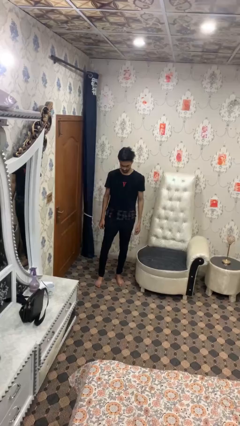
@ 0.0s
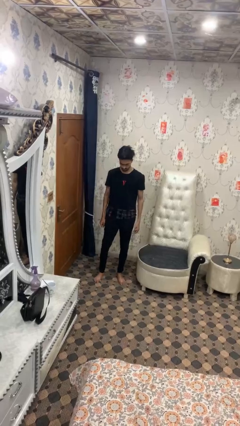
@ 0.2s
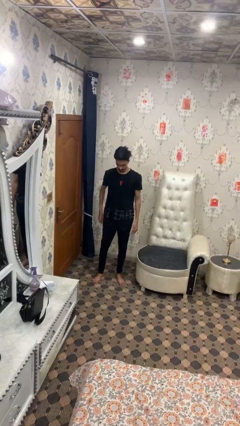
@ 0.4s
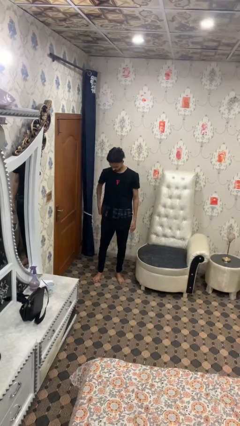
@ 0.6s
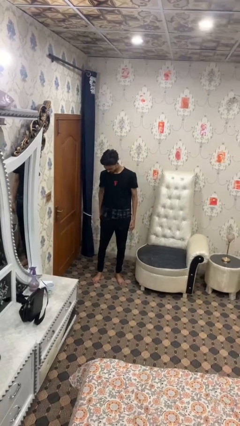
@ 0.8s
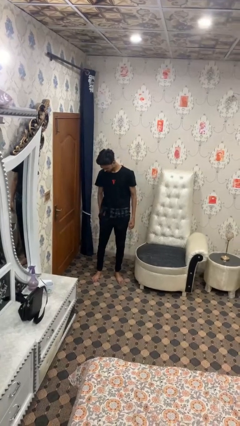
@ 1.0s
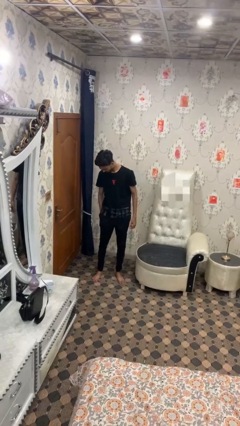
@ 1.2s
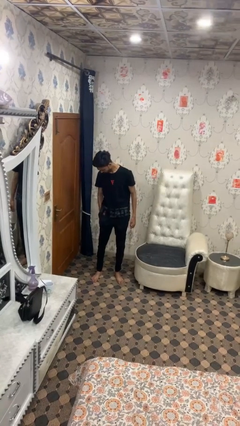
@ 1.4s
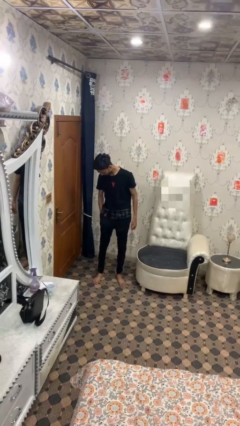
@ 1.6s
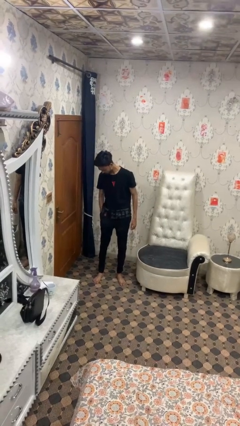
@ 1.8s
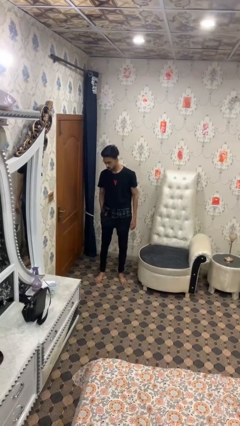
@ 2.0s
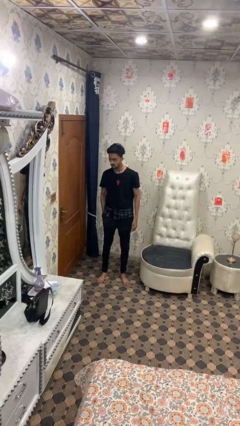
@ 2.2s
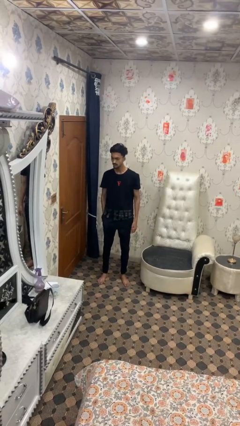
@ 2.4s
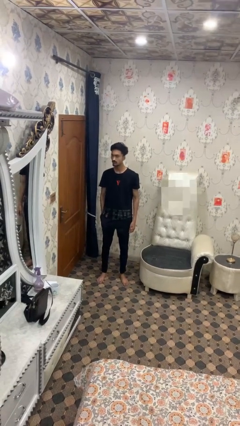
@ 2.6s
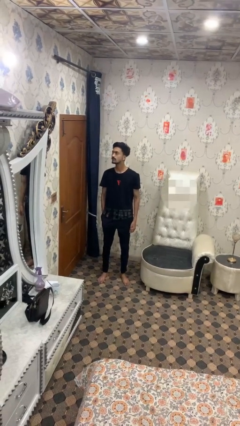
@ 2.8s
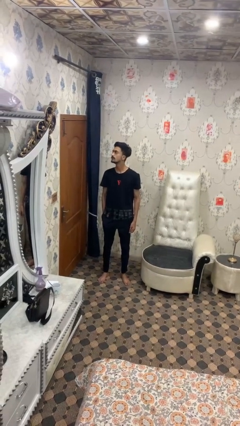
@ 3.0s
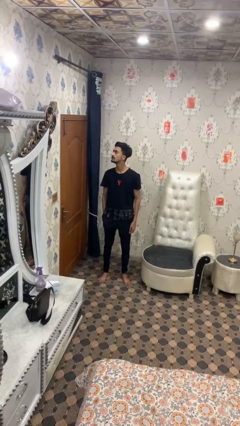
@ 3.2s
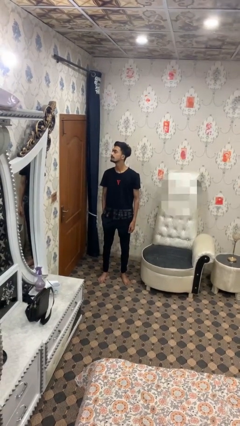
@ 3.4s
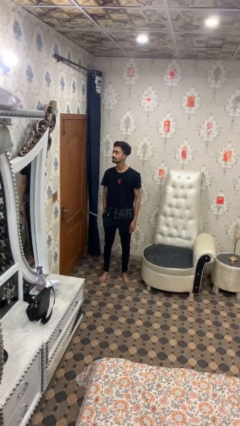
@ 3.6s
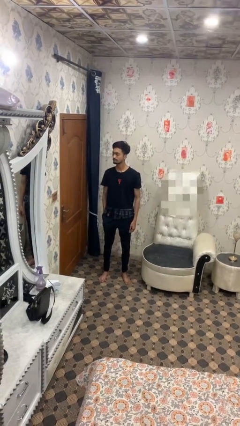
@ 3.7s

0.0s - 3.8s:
person puts hands in back pockets

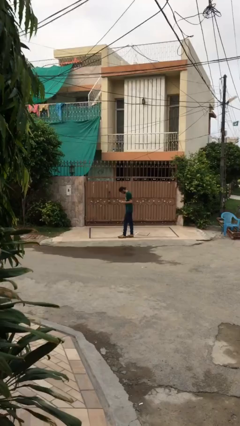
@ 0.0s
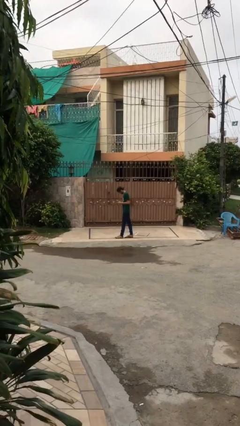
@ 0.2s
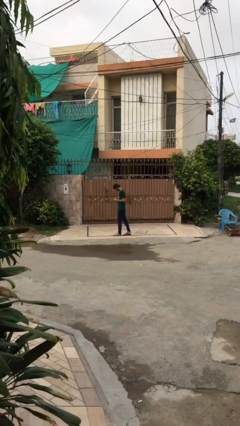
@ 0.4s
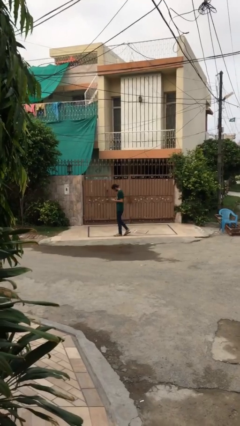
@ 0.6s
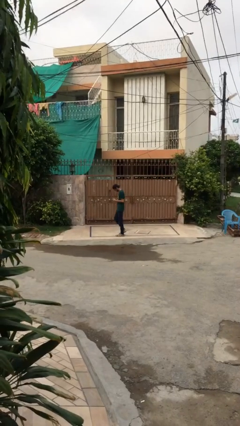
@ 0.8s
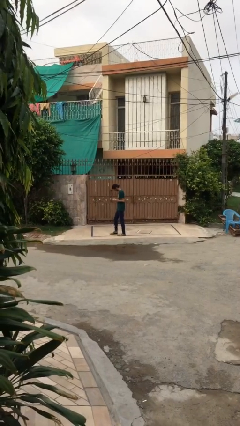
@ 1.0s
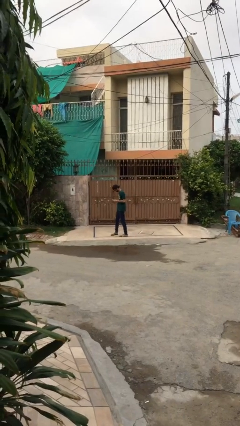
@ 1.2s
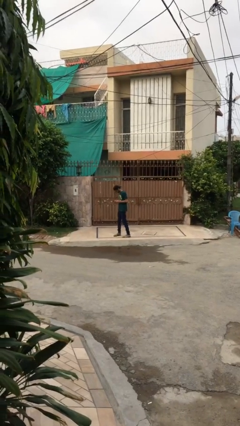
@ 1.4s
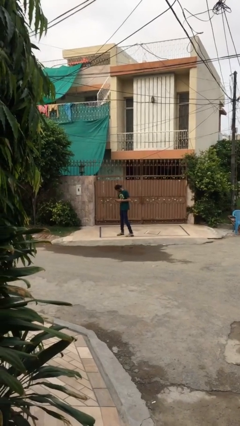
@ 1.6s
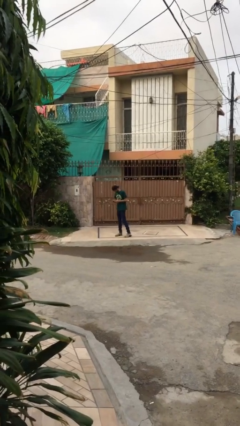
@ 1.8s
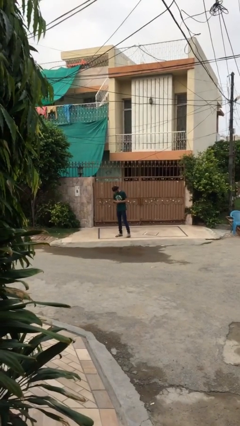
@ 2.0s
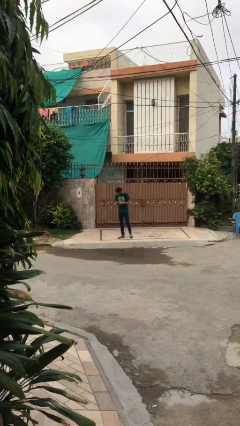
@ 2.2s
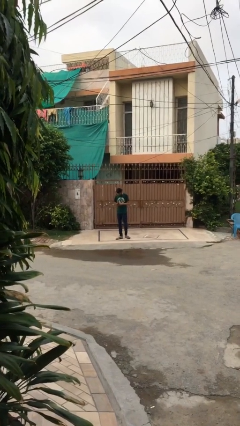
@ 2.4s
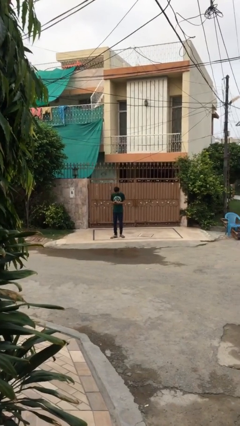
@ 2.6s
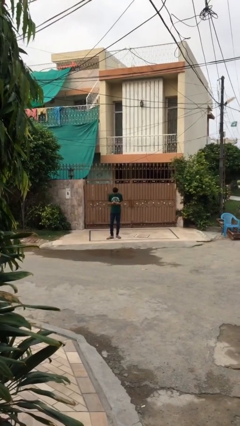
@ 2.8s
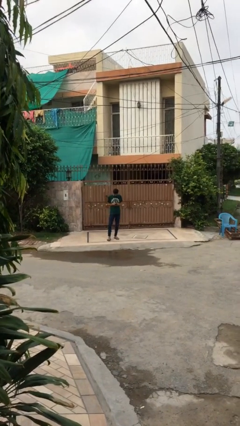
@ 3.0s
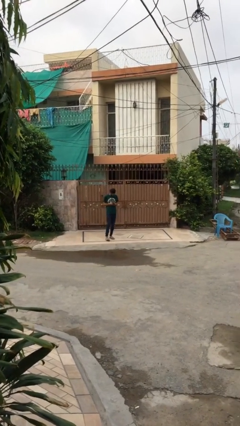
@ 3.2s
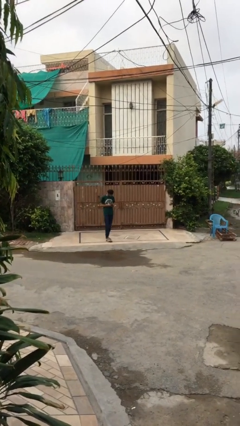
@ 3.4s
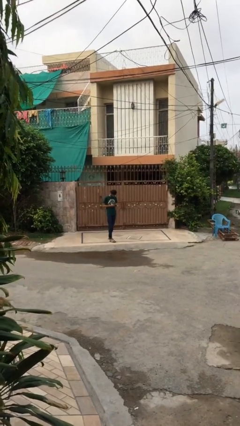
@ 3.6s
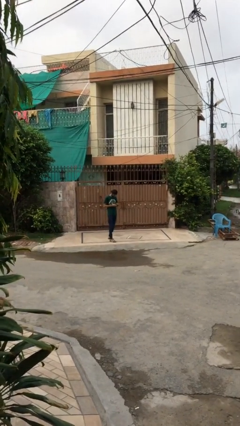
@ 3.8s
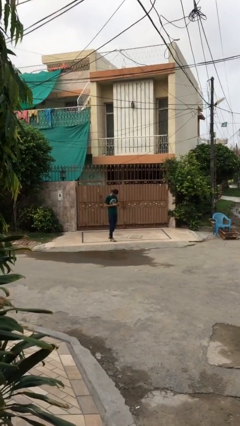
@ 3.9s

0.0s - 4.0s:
person texts on phone

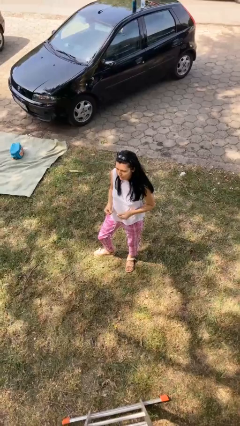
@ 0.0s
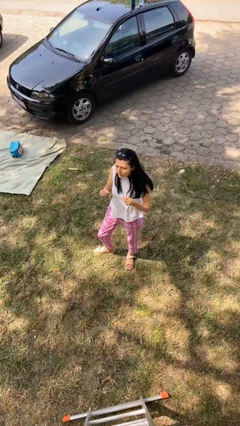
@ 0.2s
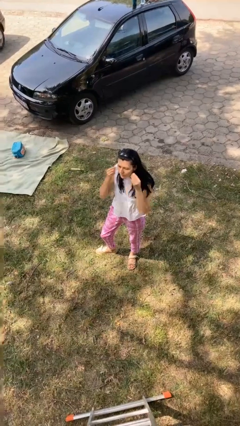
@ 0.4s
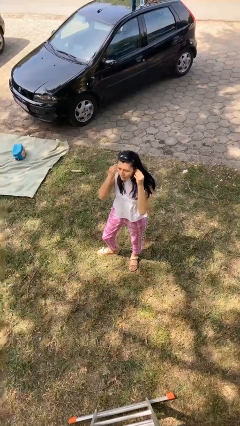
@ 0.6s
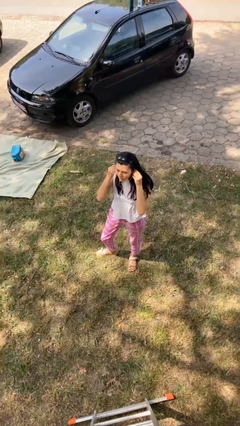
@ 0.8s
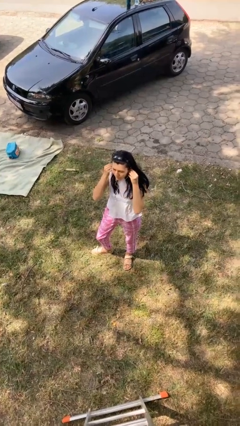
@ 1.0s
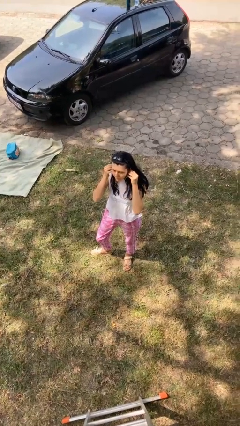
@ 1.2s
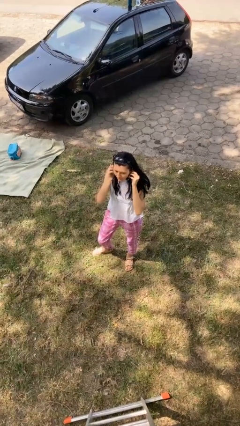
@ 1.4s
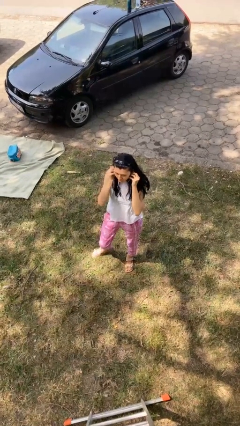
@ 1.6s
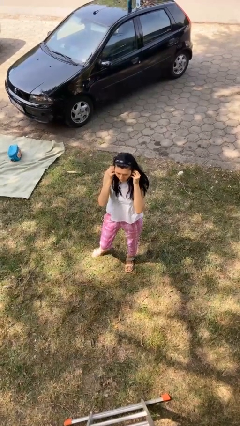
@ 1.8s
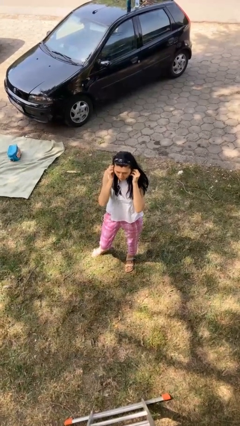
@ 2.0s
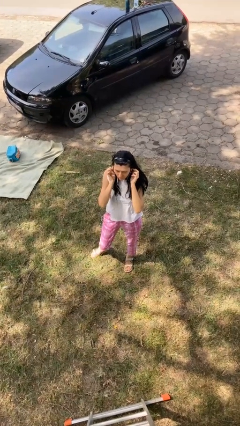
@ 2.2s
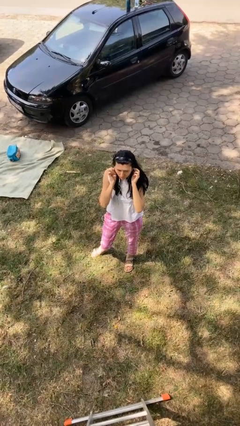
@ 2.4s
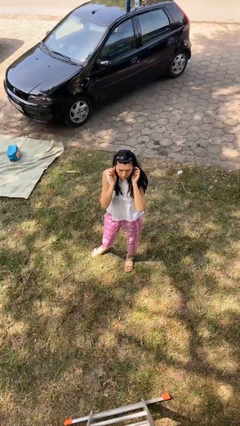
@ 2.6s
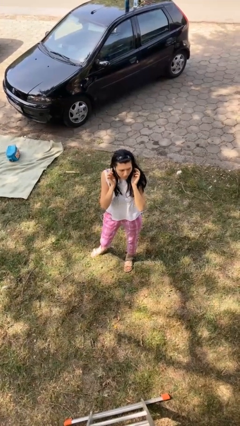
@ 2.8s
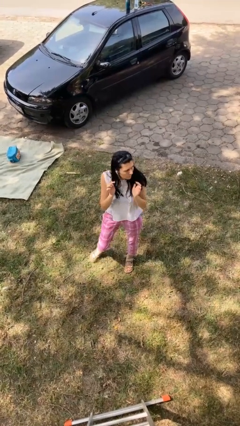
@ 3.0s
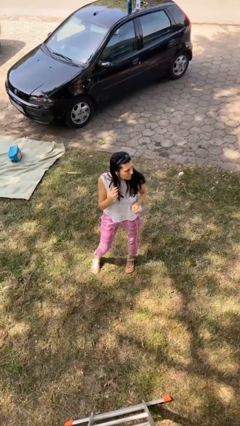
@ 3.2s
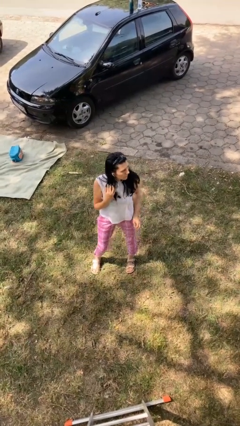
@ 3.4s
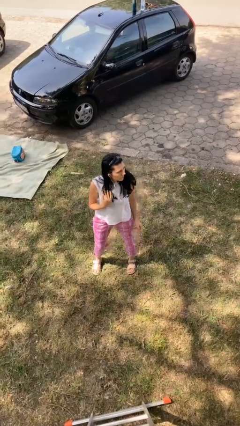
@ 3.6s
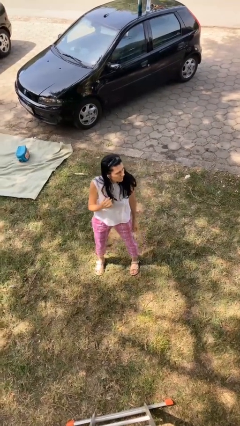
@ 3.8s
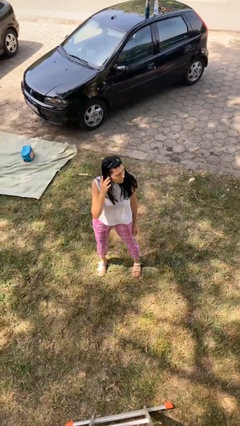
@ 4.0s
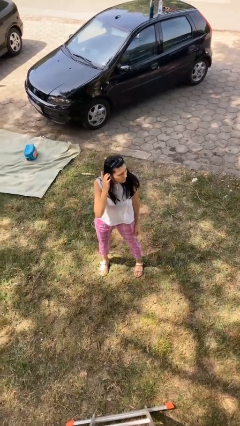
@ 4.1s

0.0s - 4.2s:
person puts on headphones

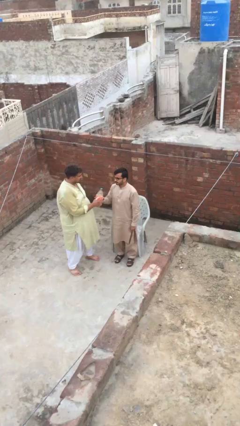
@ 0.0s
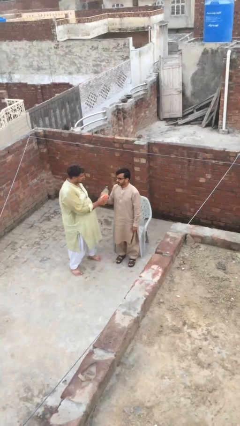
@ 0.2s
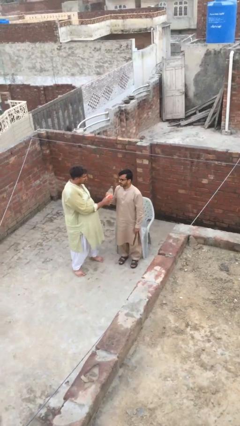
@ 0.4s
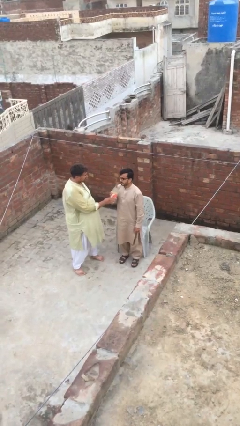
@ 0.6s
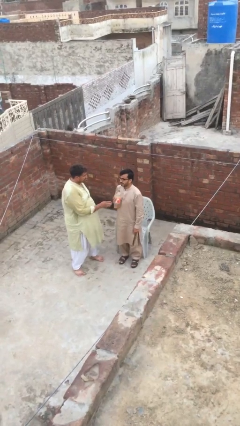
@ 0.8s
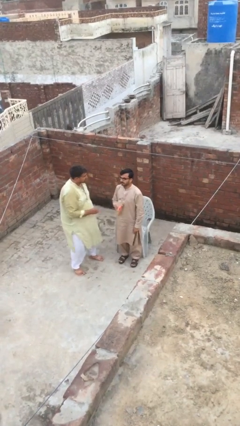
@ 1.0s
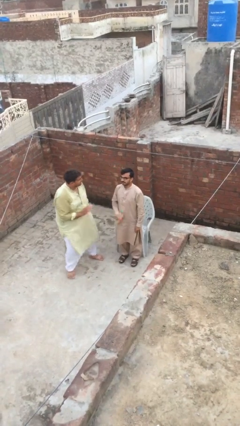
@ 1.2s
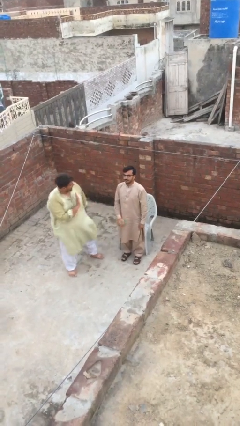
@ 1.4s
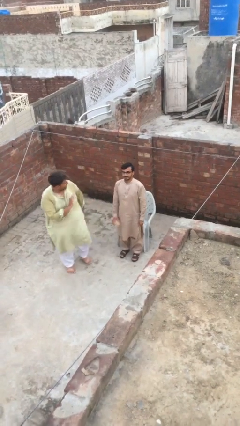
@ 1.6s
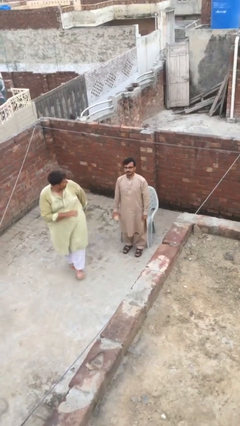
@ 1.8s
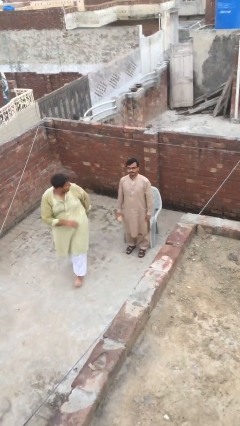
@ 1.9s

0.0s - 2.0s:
person transfers object to person

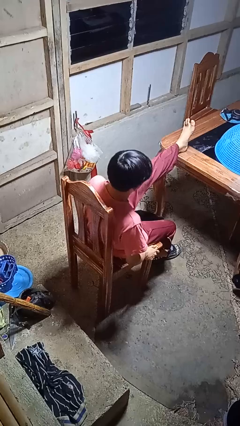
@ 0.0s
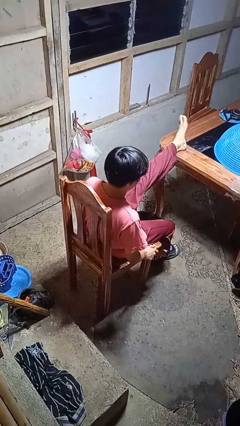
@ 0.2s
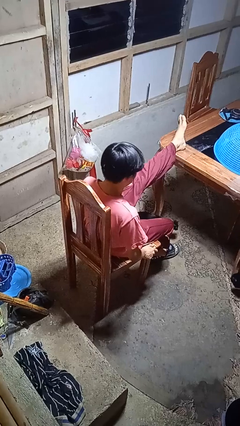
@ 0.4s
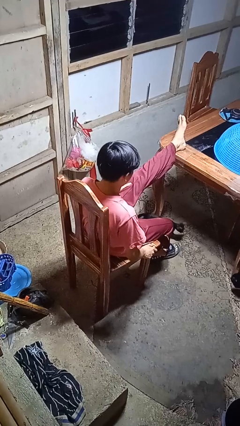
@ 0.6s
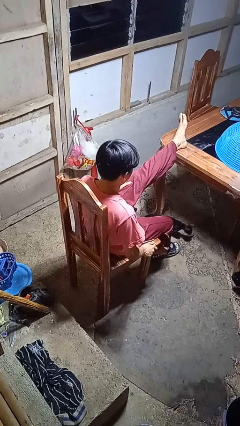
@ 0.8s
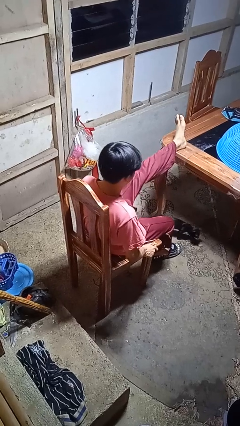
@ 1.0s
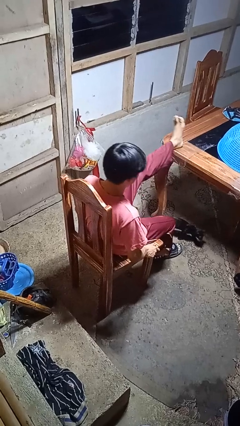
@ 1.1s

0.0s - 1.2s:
person puts feet up

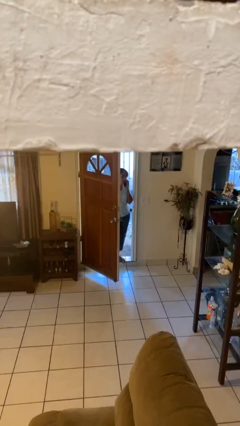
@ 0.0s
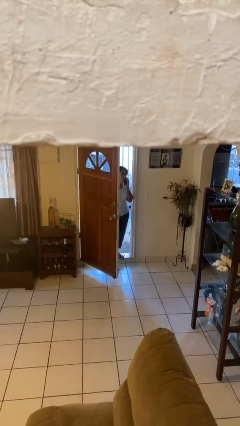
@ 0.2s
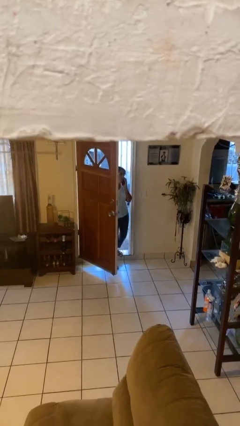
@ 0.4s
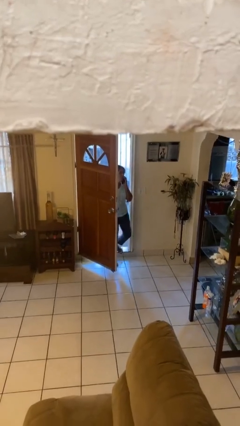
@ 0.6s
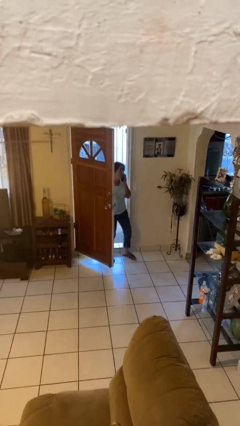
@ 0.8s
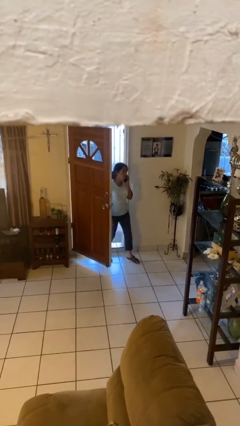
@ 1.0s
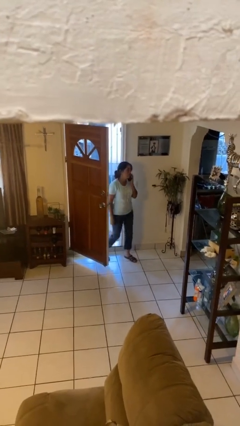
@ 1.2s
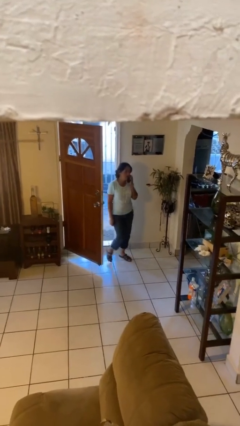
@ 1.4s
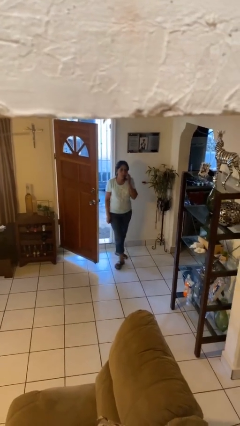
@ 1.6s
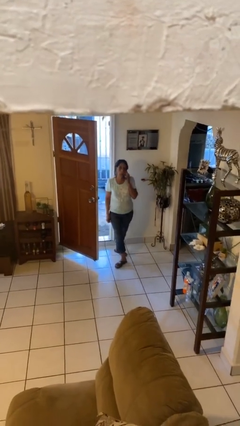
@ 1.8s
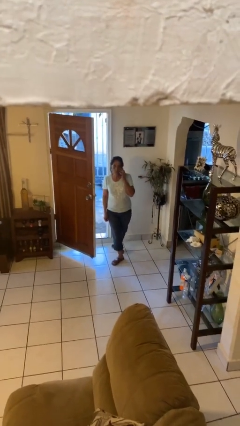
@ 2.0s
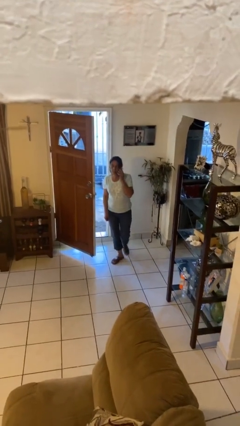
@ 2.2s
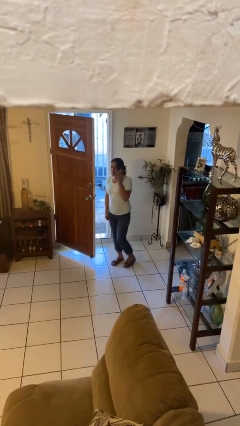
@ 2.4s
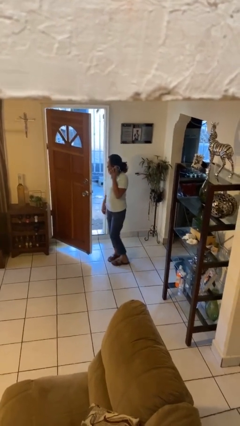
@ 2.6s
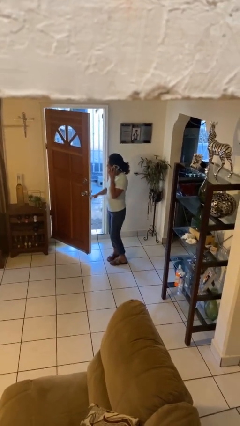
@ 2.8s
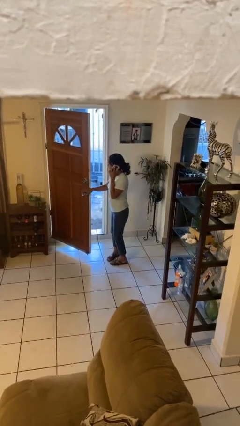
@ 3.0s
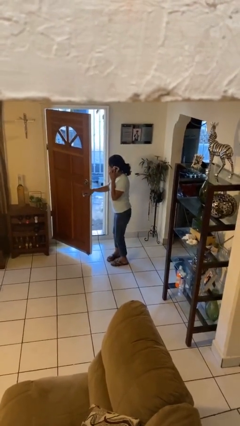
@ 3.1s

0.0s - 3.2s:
person enters scene through structure
